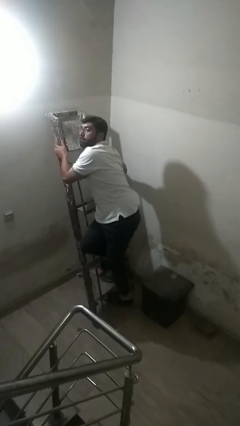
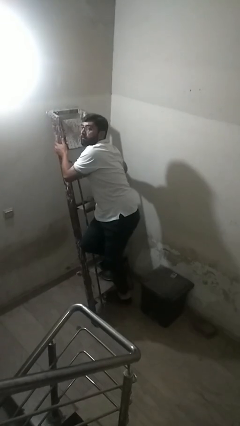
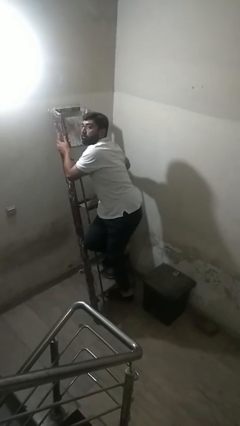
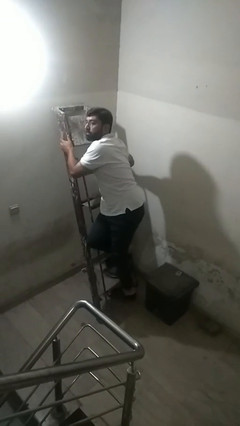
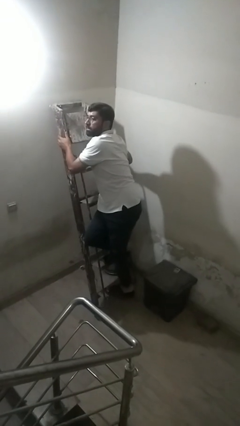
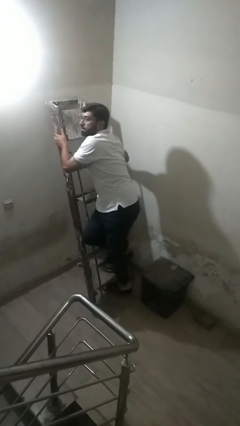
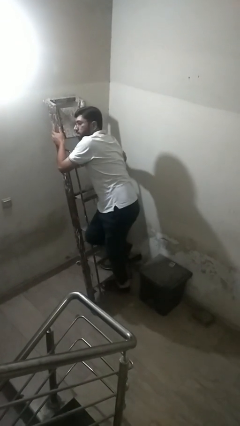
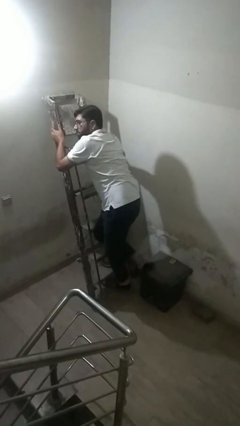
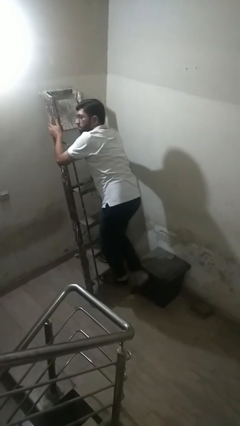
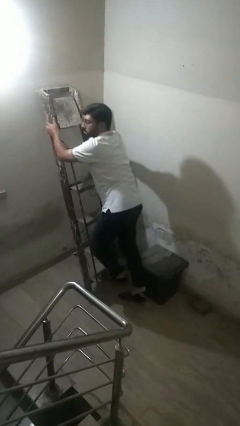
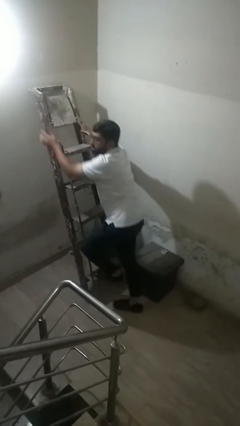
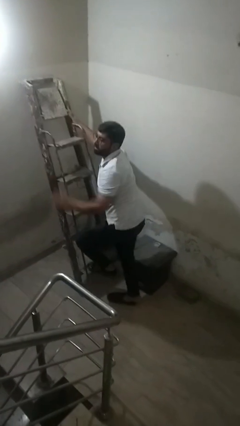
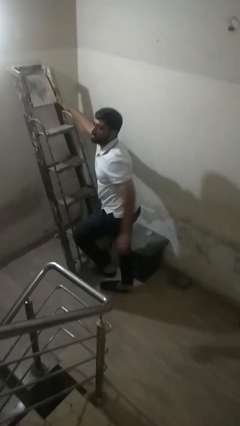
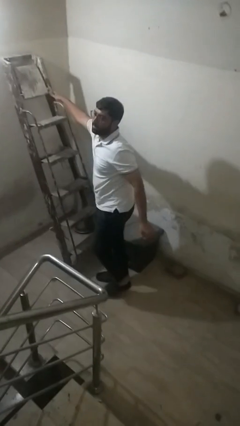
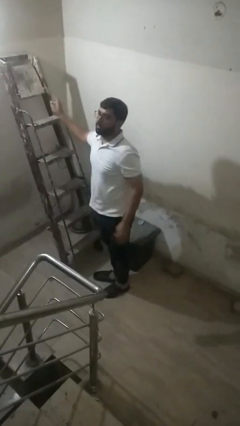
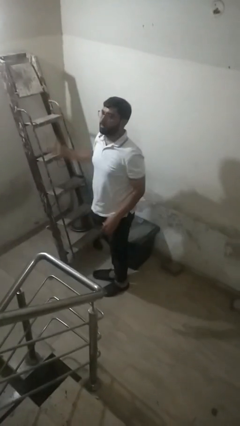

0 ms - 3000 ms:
person climbs down ladder

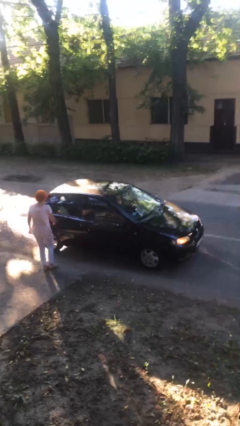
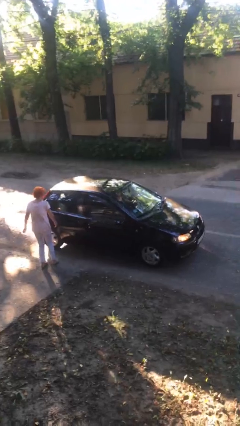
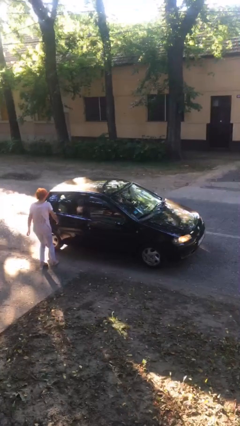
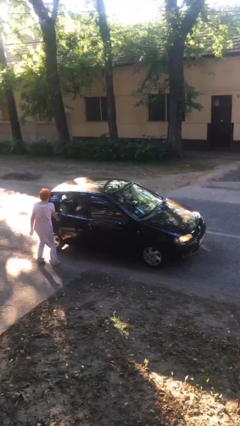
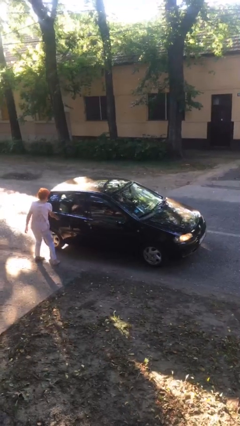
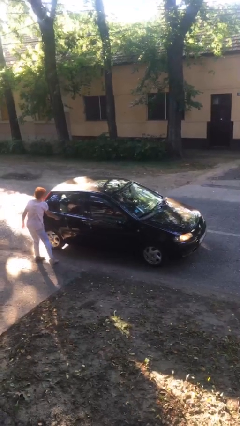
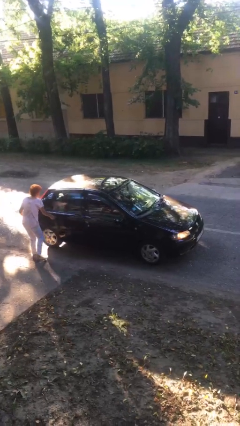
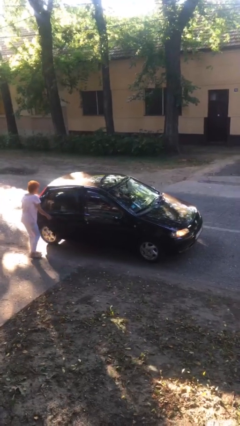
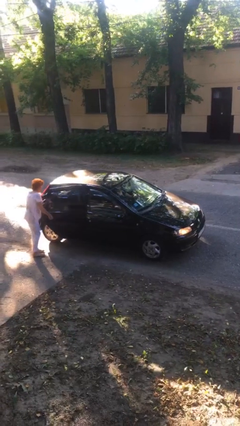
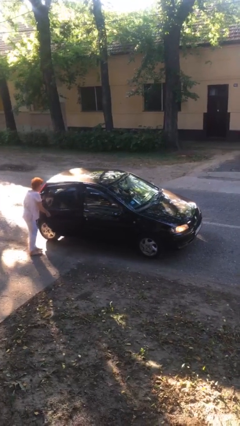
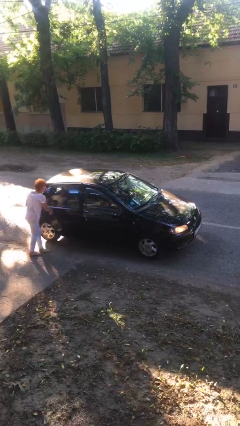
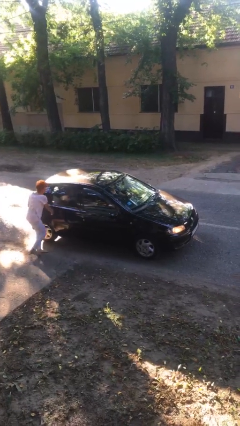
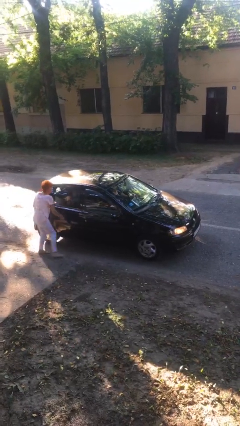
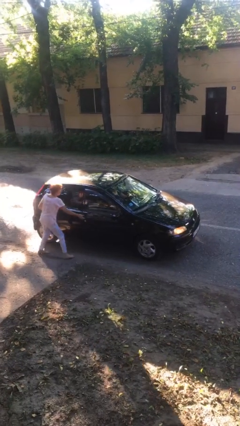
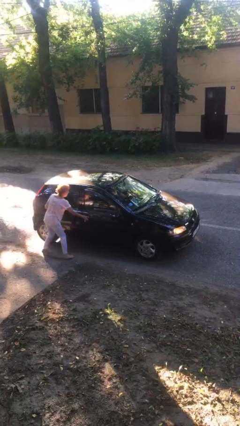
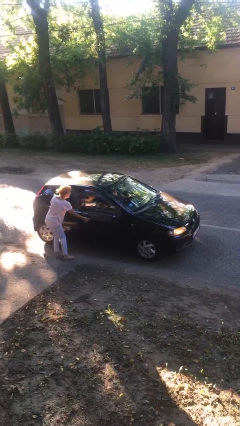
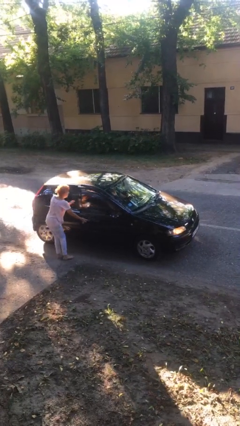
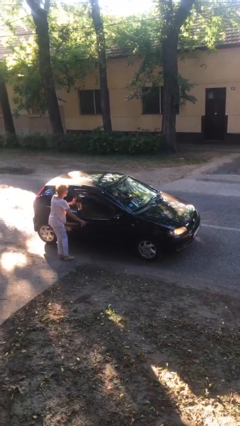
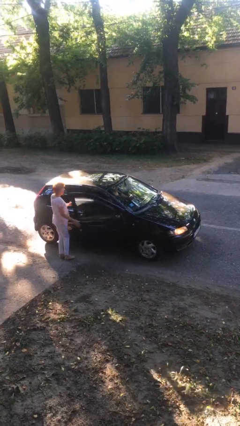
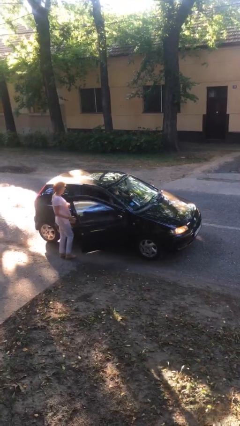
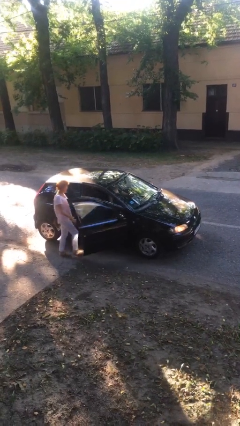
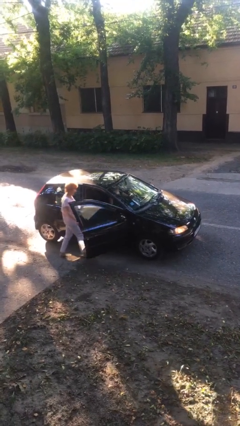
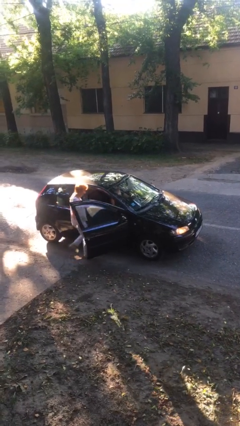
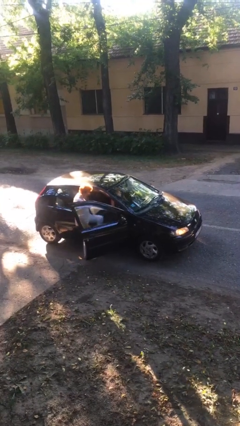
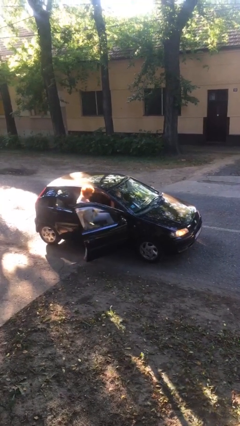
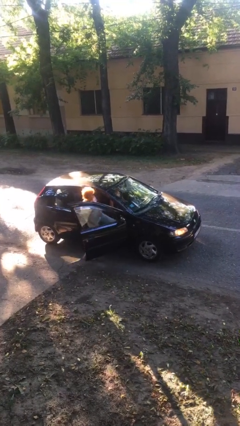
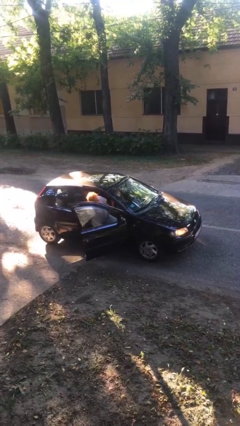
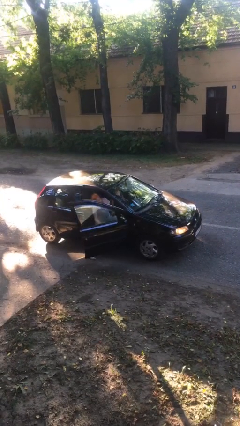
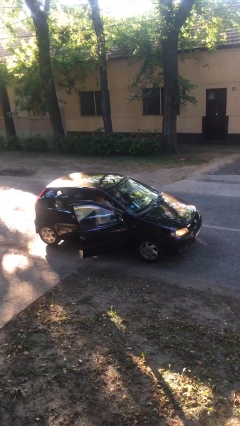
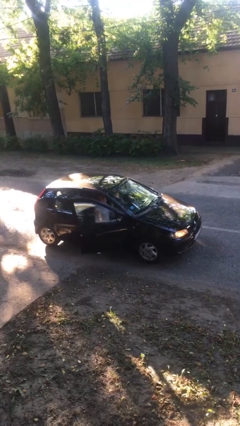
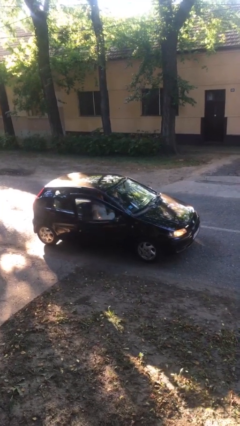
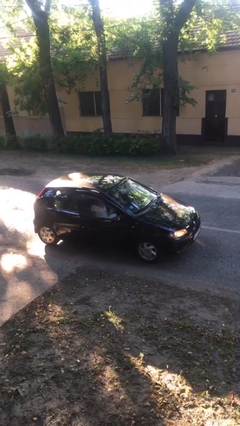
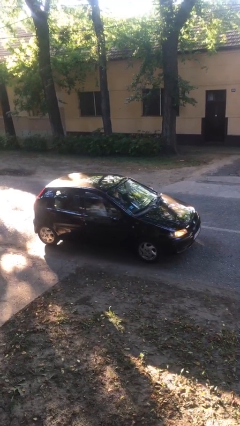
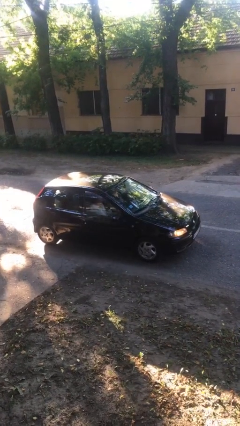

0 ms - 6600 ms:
car picks up person

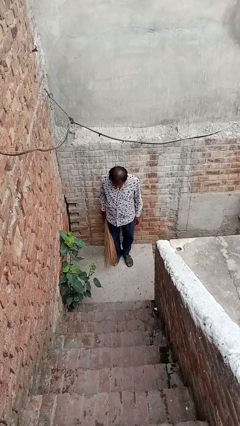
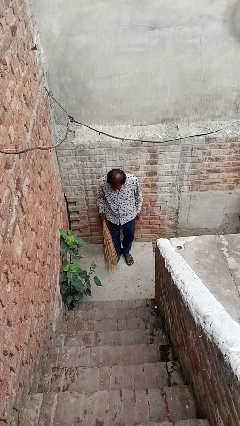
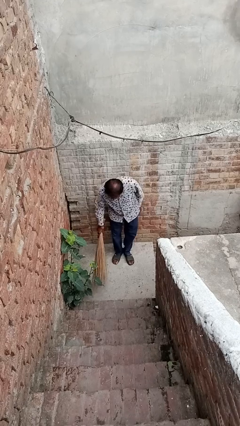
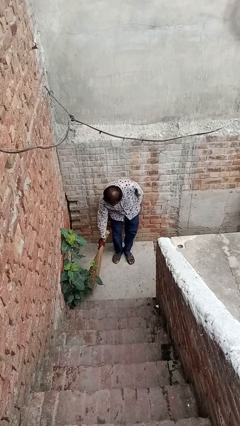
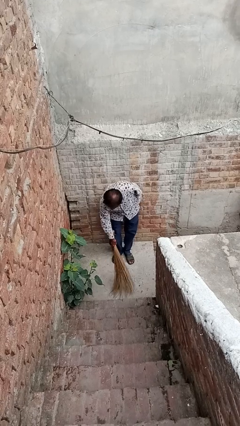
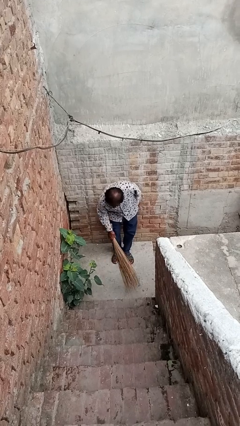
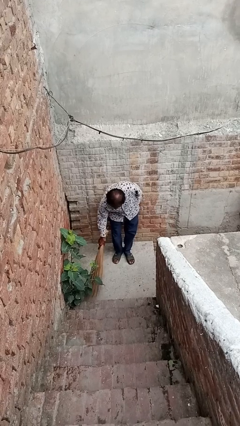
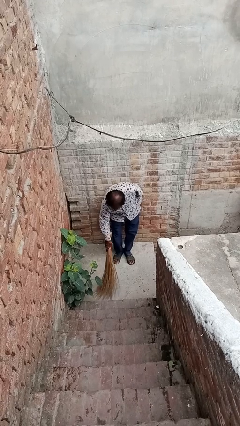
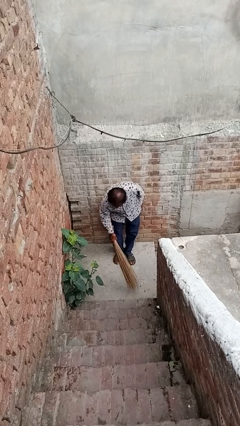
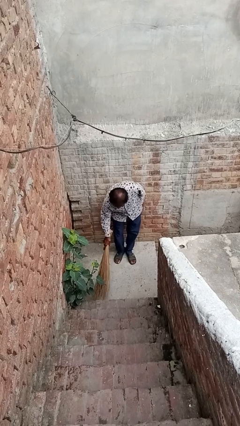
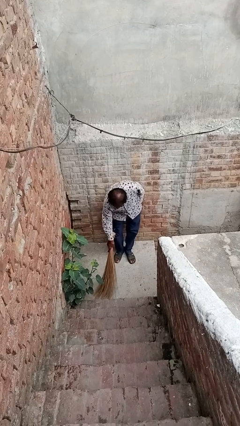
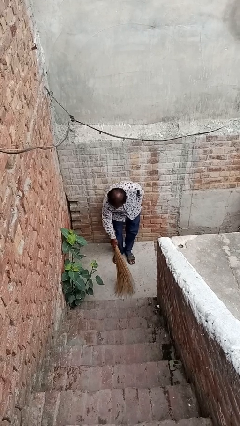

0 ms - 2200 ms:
person sweeps floor

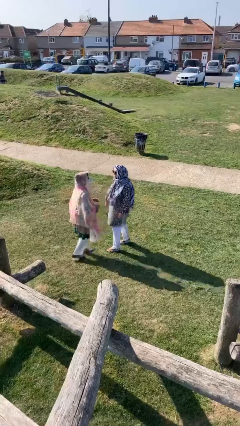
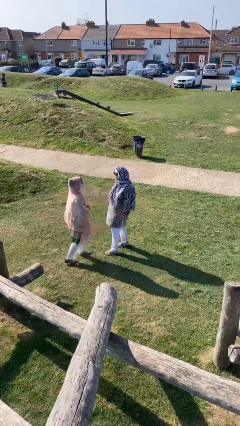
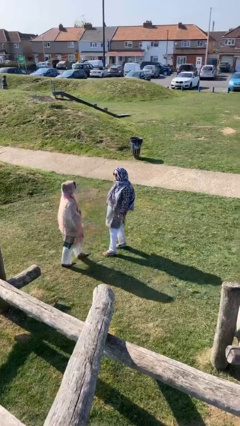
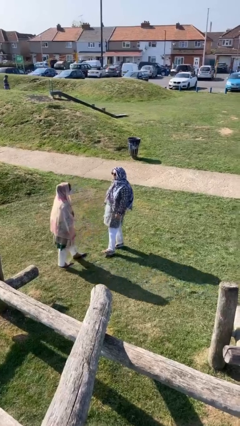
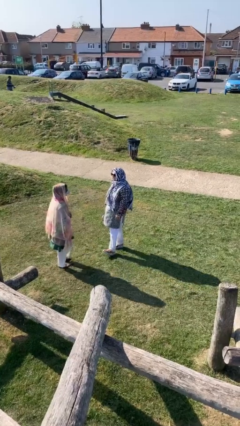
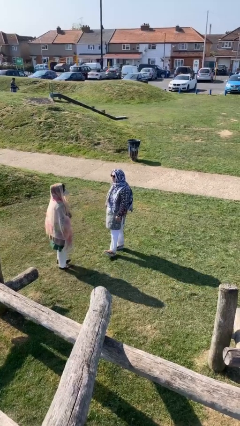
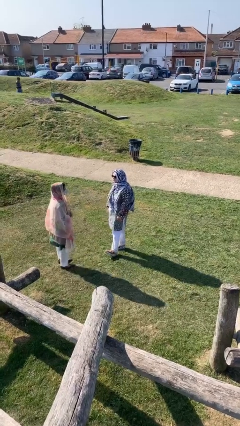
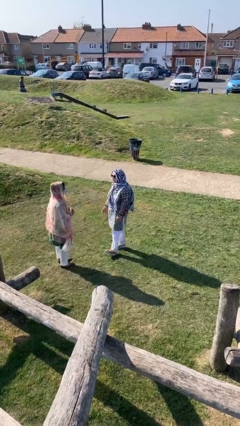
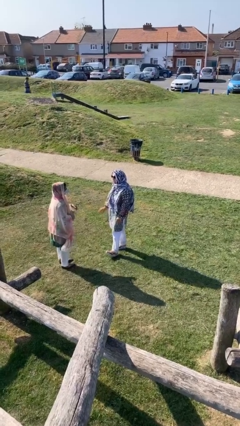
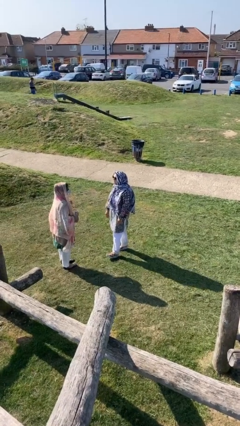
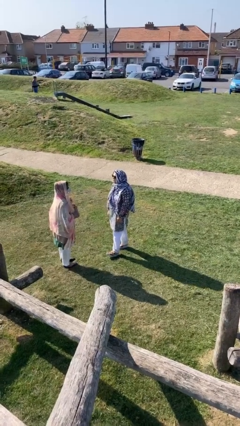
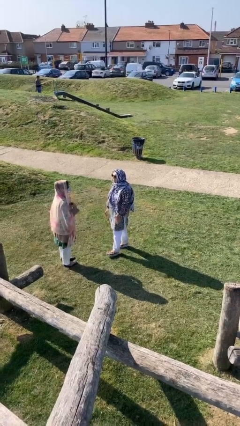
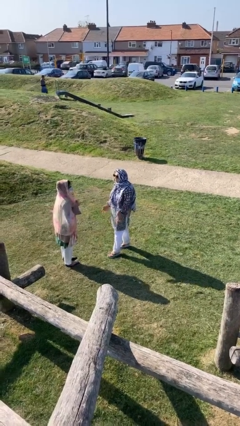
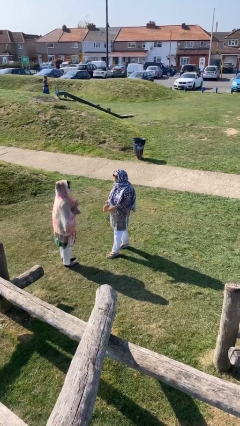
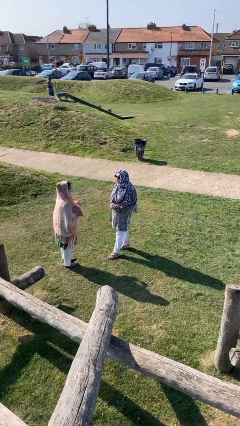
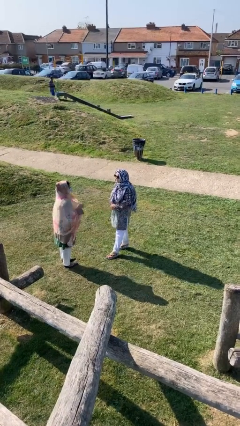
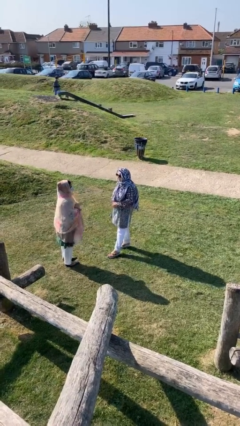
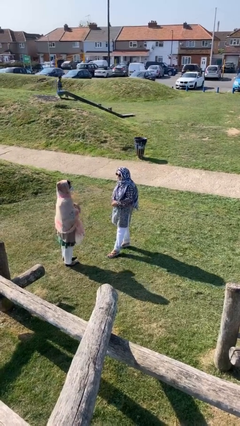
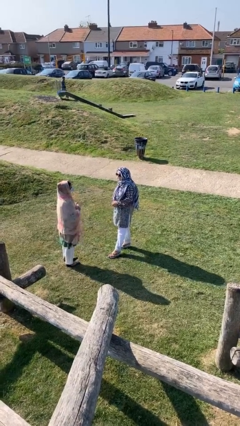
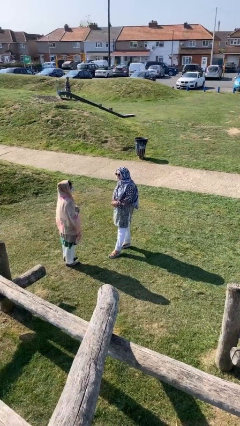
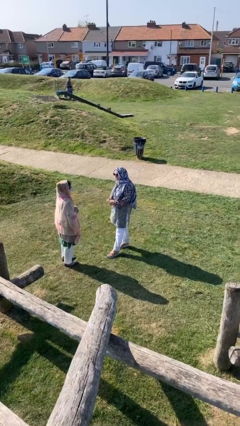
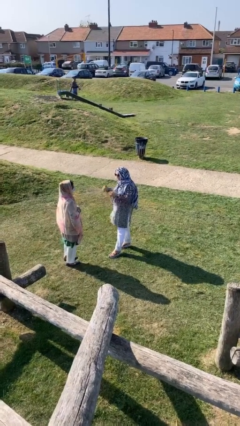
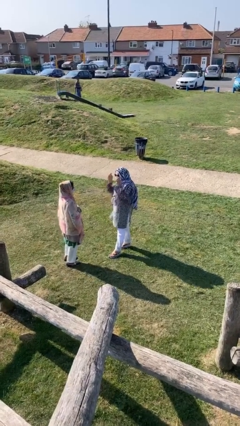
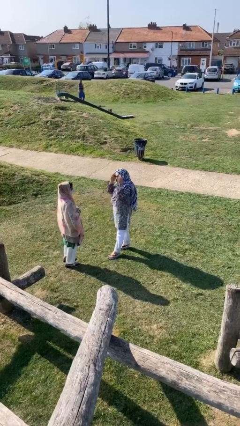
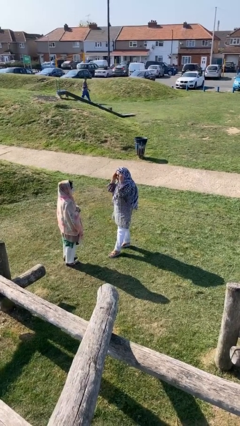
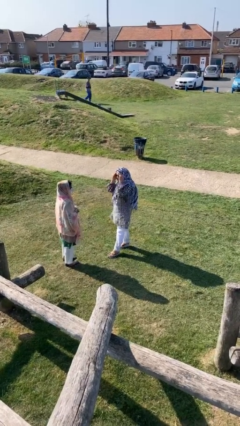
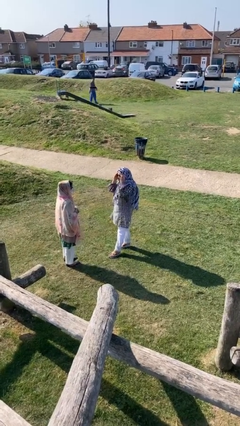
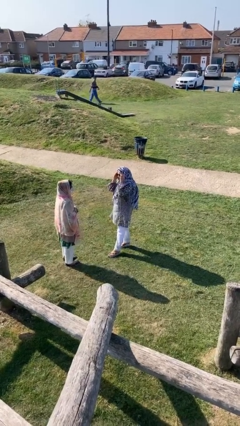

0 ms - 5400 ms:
person talks to person

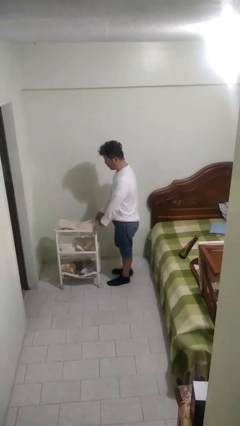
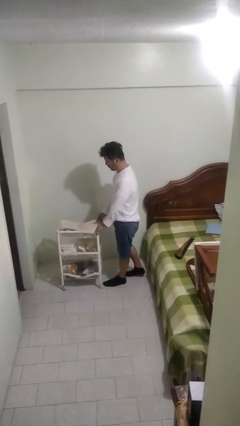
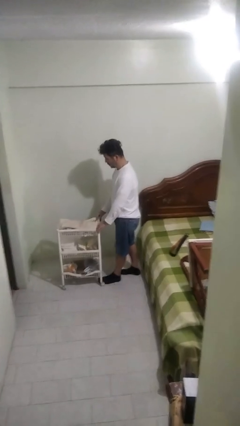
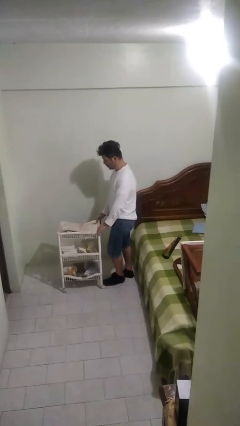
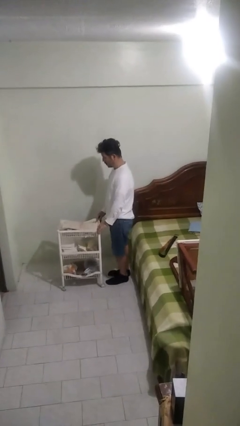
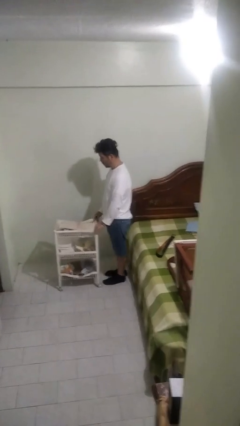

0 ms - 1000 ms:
person pulls wheeled cart
